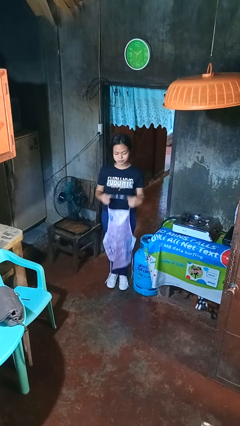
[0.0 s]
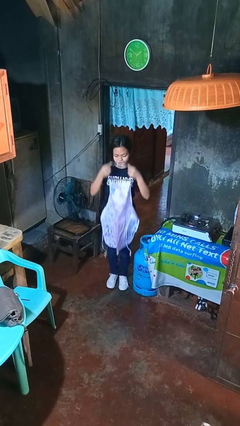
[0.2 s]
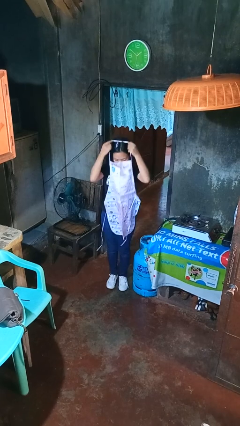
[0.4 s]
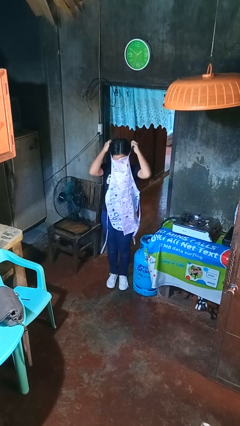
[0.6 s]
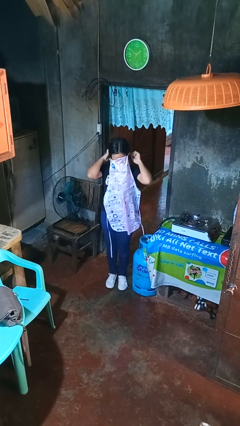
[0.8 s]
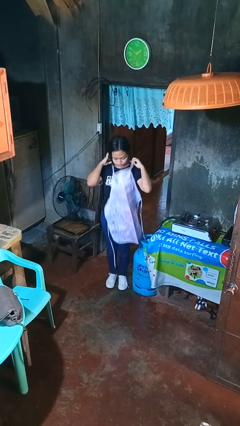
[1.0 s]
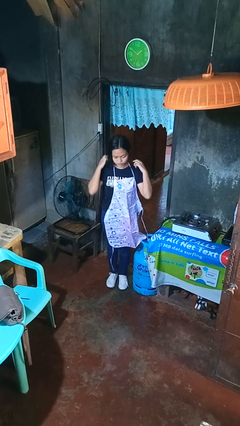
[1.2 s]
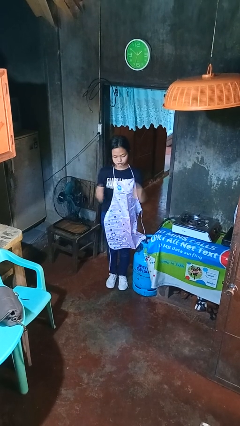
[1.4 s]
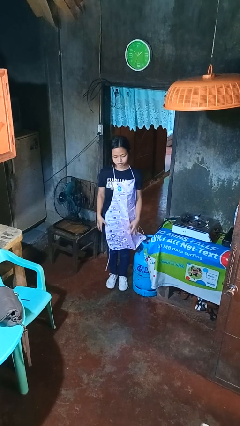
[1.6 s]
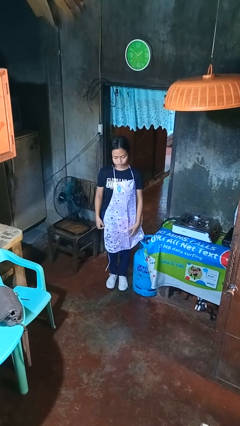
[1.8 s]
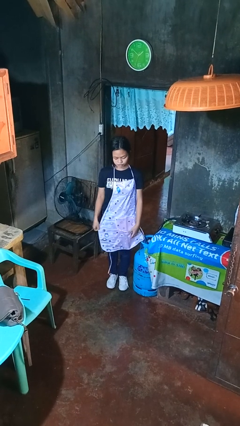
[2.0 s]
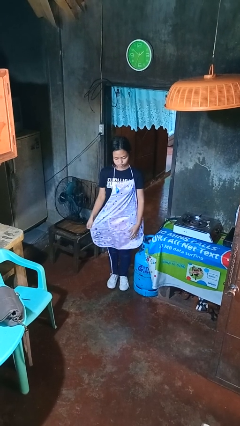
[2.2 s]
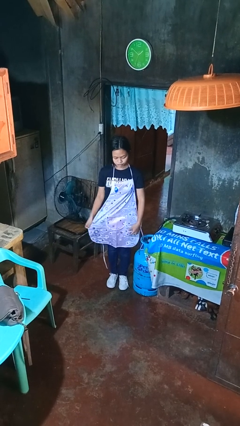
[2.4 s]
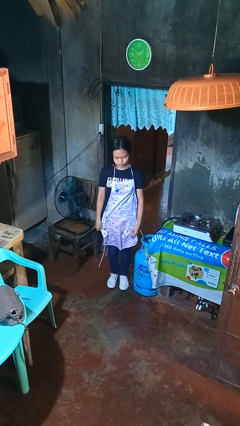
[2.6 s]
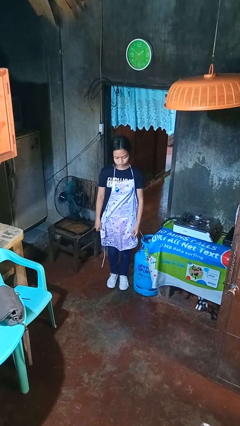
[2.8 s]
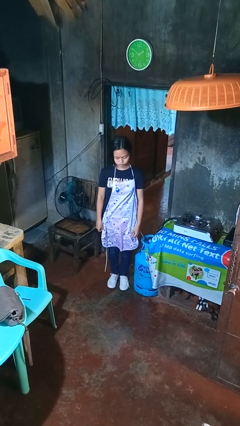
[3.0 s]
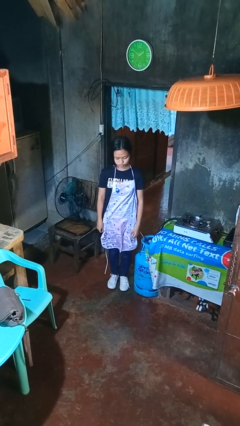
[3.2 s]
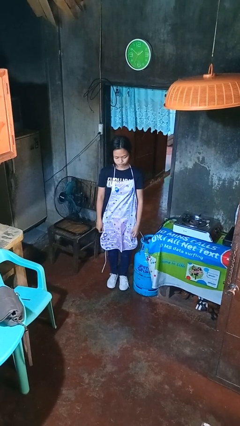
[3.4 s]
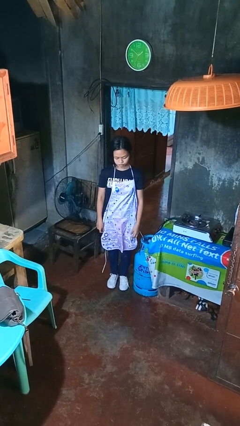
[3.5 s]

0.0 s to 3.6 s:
person puts on apron

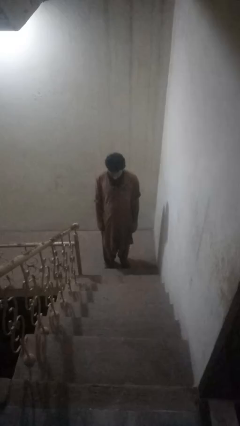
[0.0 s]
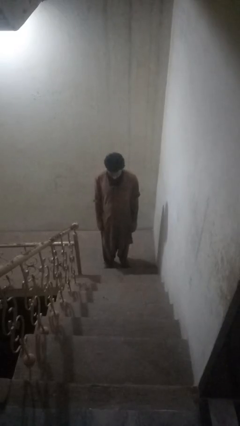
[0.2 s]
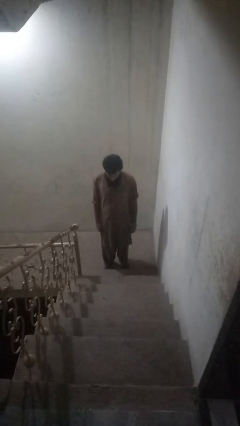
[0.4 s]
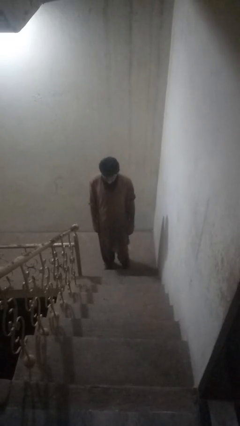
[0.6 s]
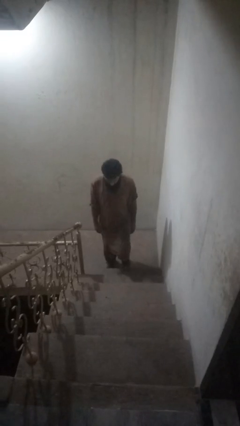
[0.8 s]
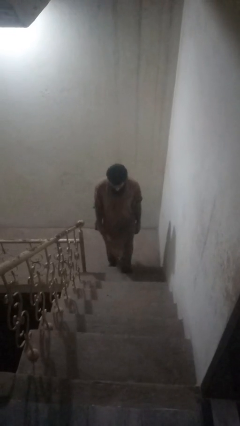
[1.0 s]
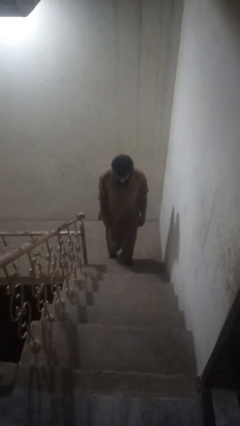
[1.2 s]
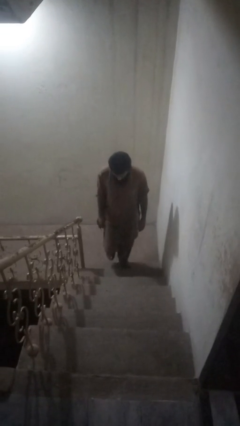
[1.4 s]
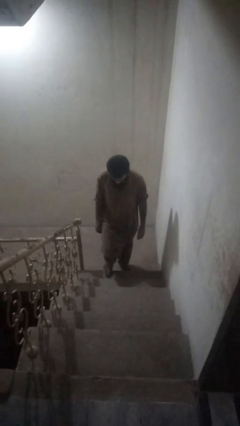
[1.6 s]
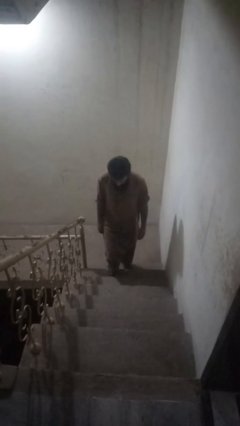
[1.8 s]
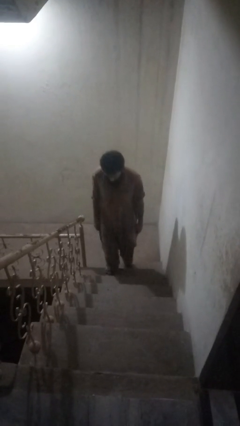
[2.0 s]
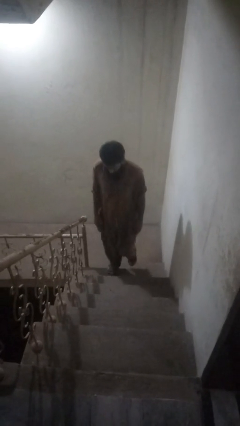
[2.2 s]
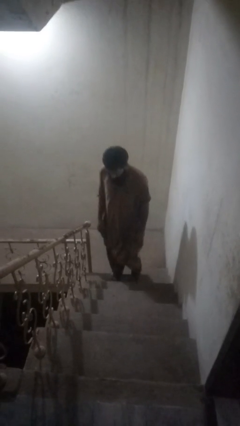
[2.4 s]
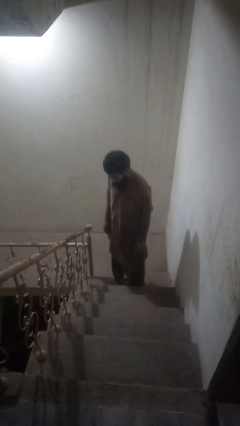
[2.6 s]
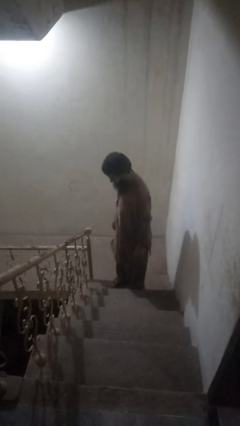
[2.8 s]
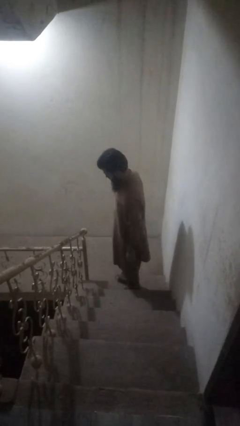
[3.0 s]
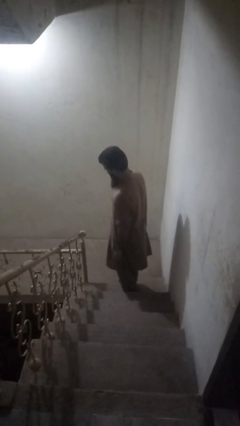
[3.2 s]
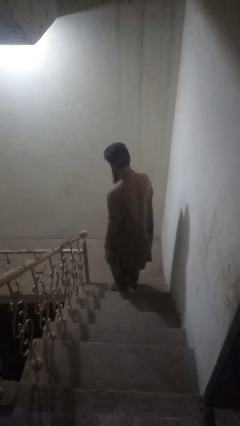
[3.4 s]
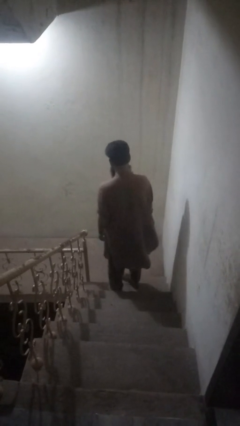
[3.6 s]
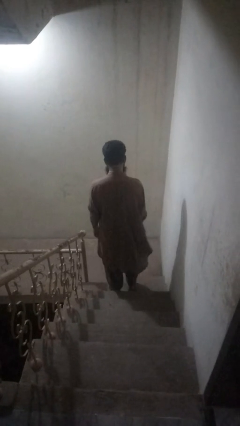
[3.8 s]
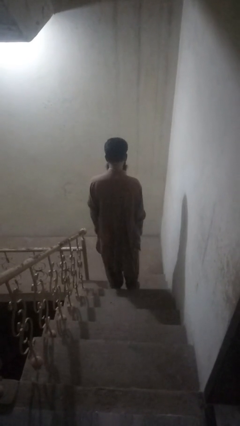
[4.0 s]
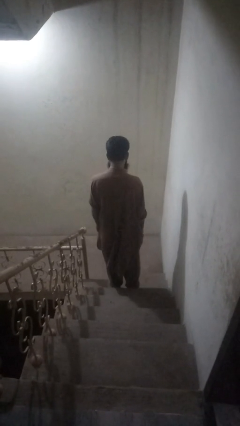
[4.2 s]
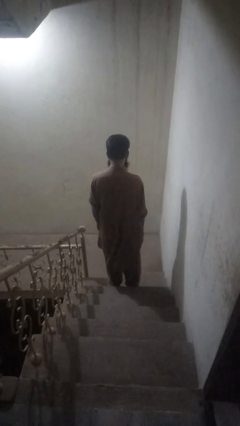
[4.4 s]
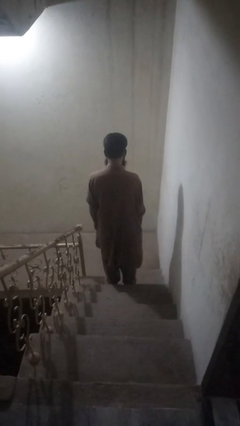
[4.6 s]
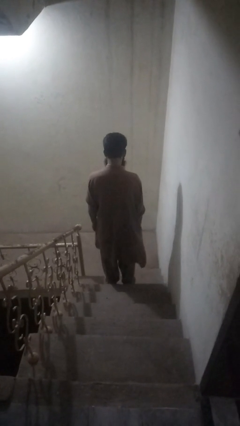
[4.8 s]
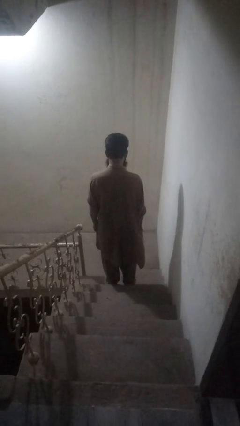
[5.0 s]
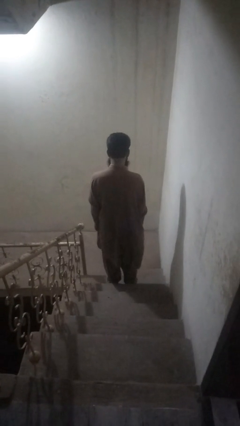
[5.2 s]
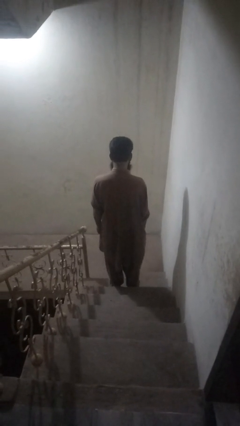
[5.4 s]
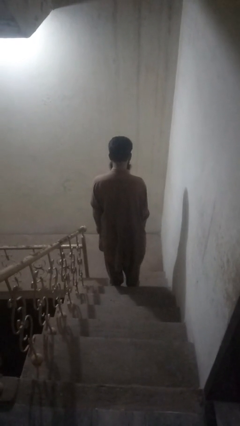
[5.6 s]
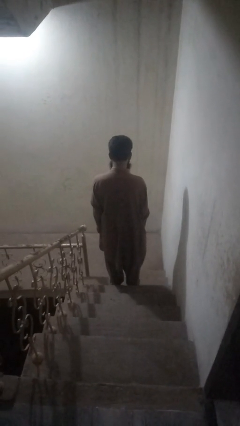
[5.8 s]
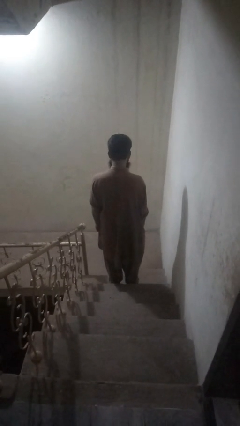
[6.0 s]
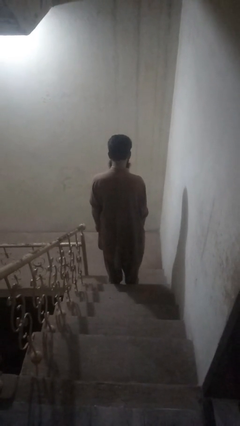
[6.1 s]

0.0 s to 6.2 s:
person climbs up stairs

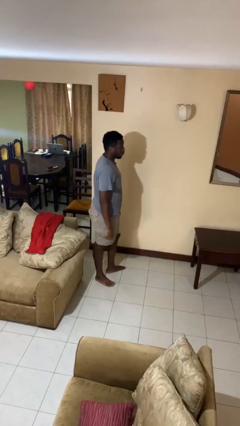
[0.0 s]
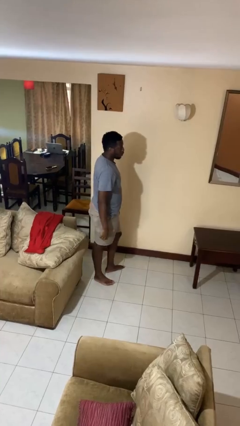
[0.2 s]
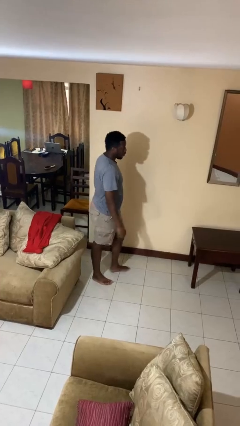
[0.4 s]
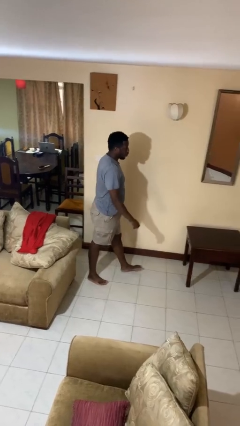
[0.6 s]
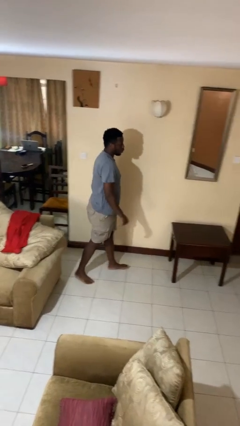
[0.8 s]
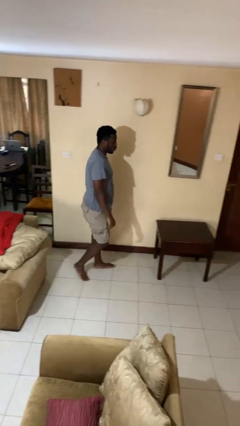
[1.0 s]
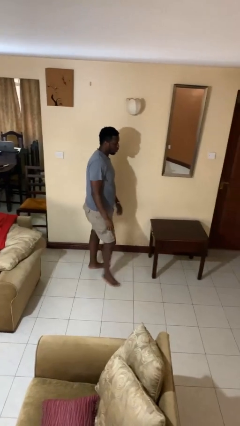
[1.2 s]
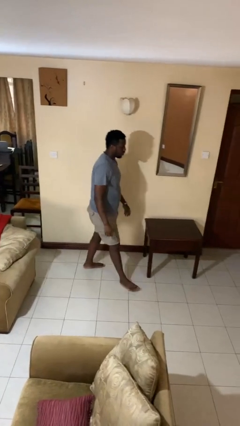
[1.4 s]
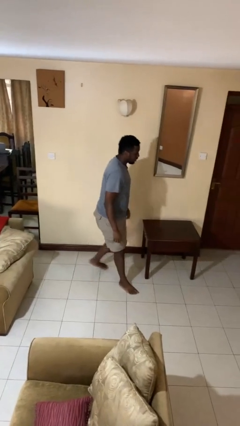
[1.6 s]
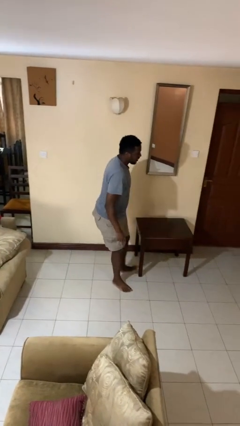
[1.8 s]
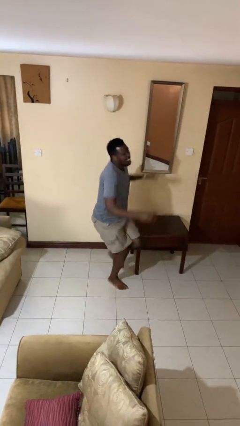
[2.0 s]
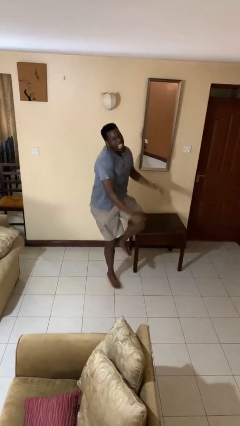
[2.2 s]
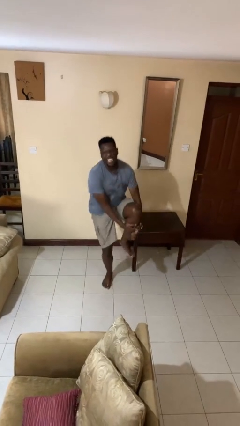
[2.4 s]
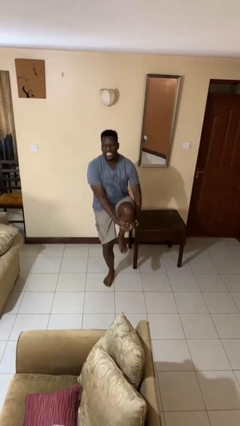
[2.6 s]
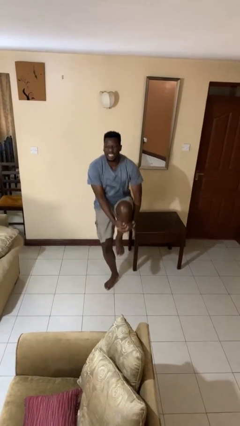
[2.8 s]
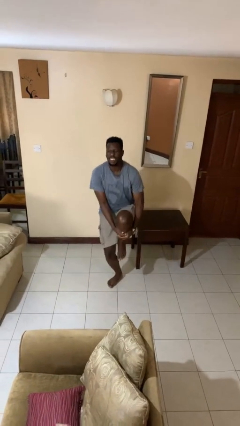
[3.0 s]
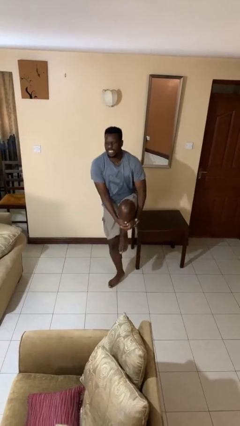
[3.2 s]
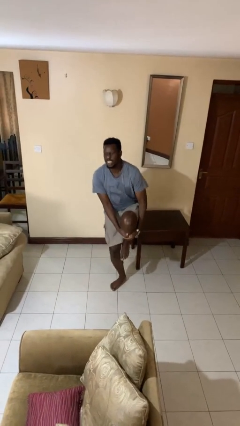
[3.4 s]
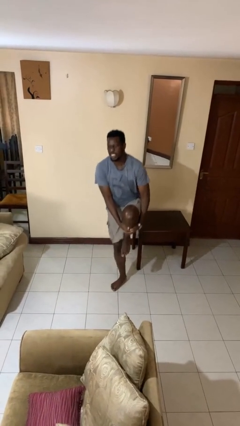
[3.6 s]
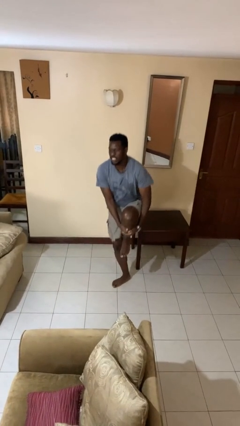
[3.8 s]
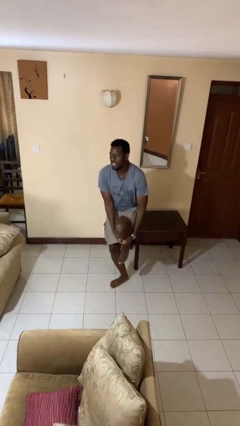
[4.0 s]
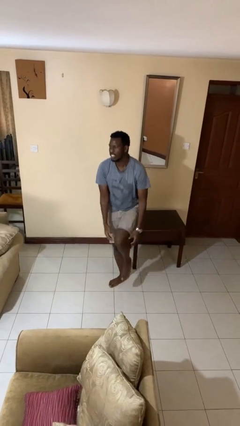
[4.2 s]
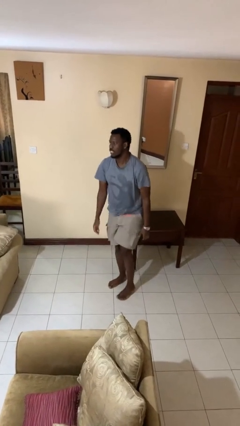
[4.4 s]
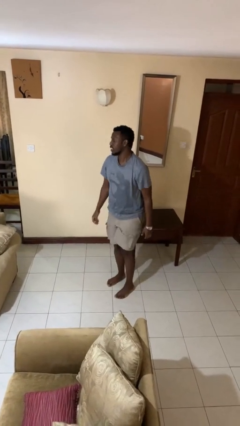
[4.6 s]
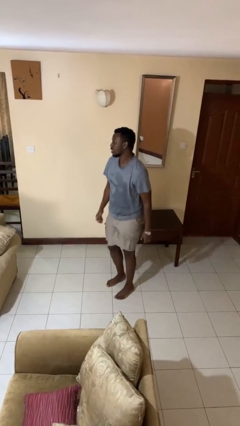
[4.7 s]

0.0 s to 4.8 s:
person stubs toe

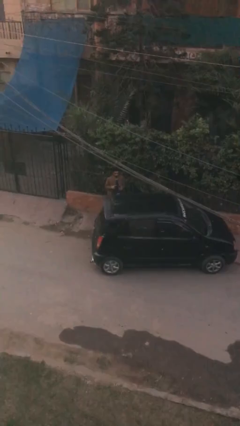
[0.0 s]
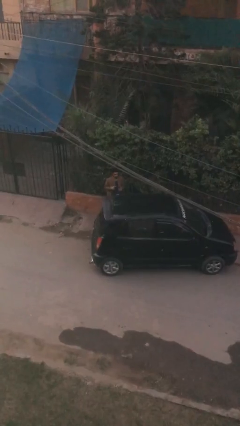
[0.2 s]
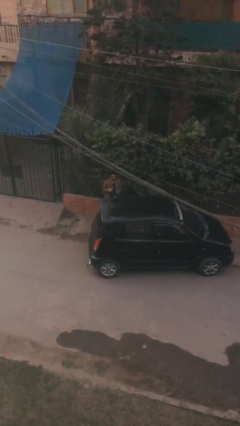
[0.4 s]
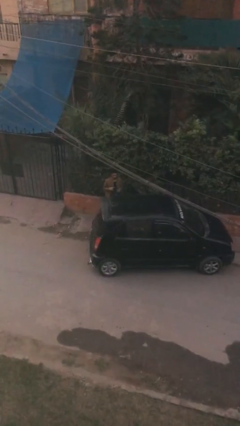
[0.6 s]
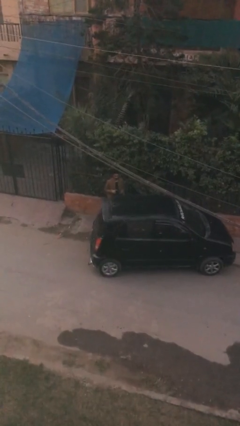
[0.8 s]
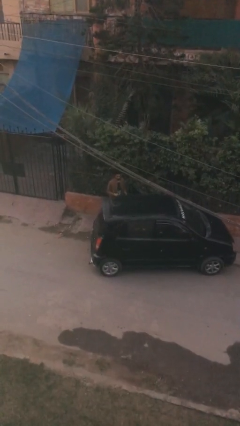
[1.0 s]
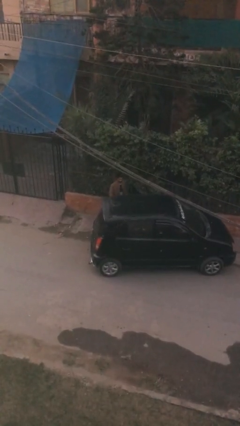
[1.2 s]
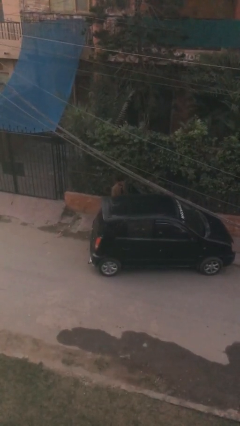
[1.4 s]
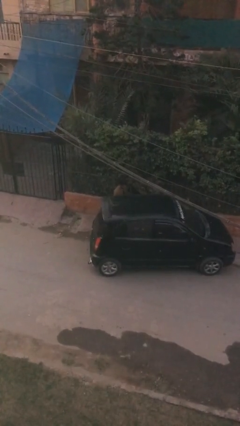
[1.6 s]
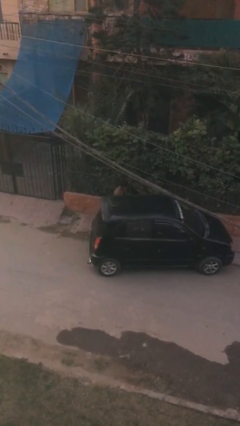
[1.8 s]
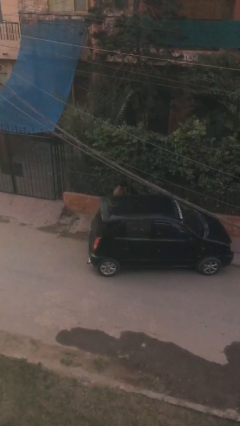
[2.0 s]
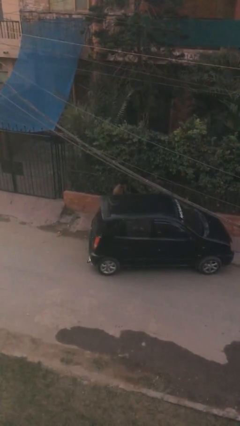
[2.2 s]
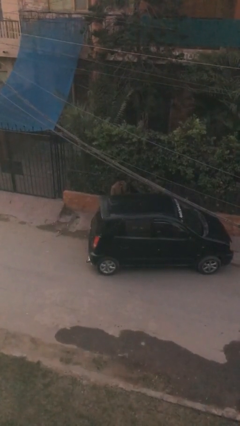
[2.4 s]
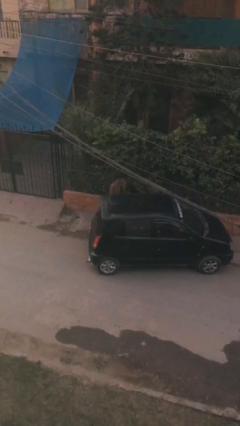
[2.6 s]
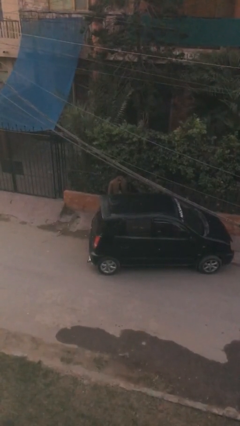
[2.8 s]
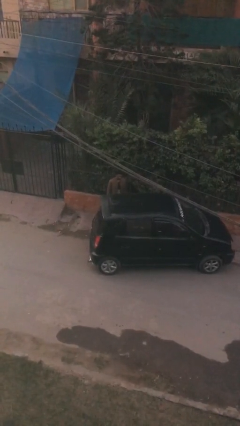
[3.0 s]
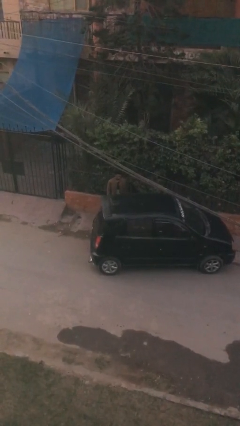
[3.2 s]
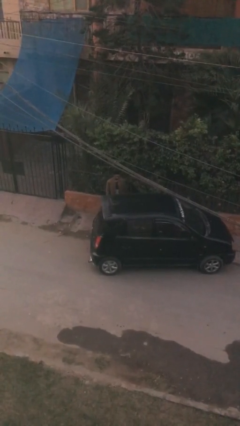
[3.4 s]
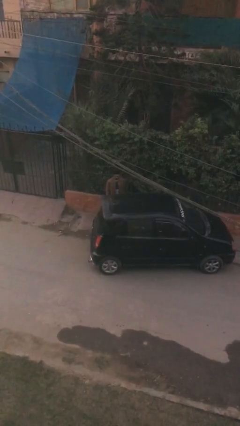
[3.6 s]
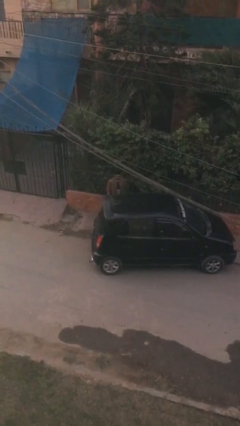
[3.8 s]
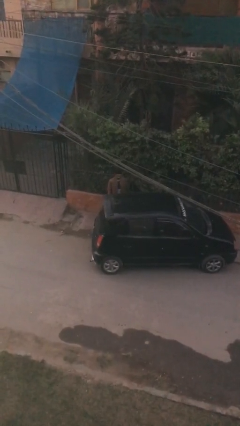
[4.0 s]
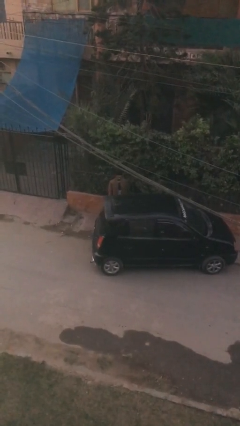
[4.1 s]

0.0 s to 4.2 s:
person loads car
